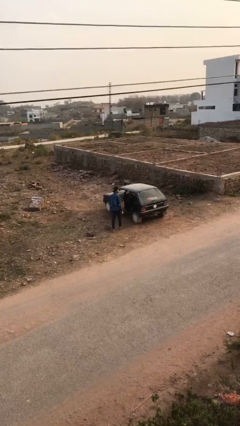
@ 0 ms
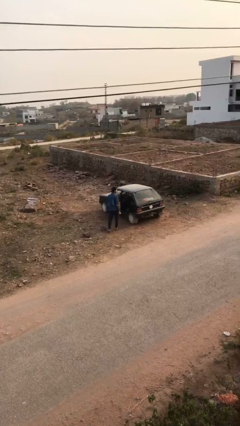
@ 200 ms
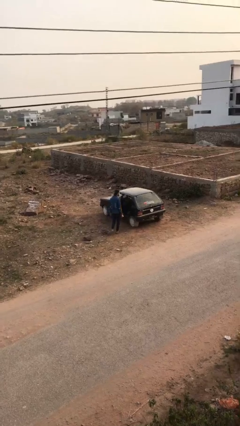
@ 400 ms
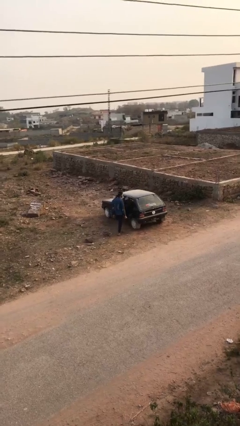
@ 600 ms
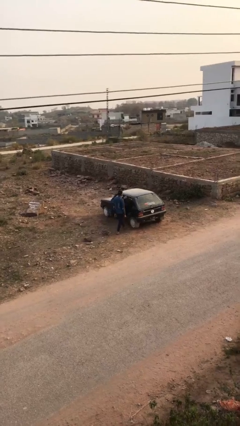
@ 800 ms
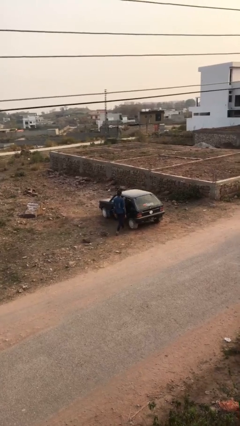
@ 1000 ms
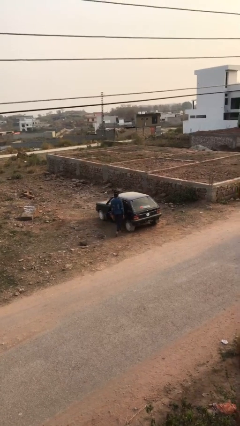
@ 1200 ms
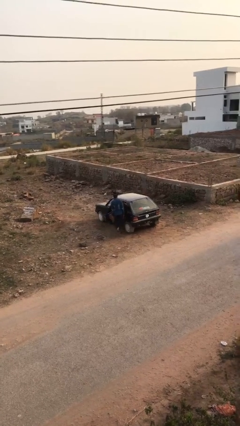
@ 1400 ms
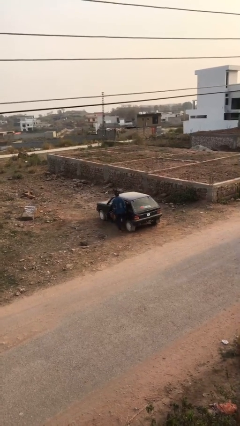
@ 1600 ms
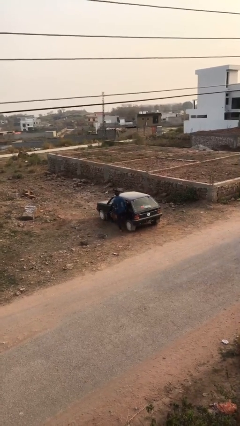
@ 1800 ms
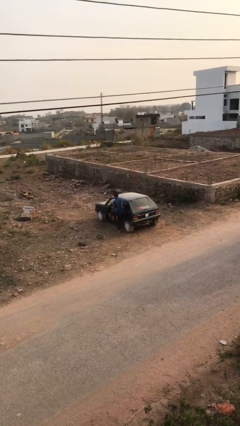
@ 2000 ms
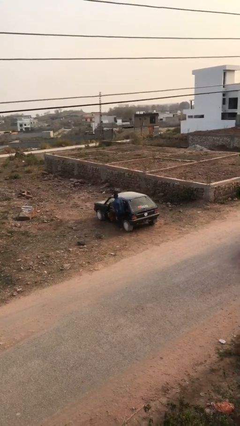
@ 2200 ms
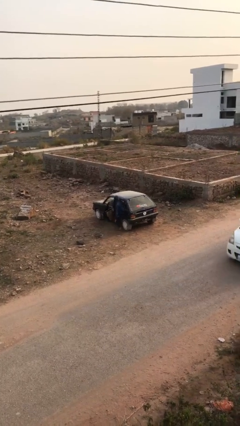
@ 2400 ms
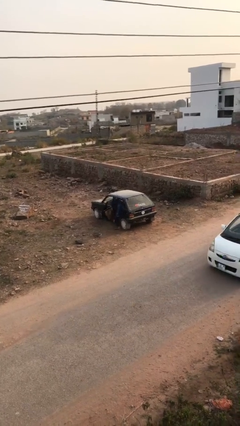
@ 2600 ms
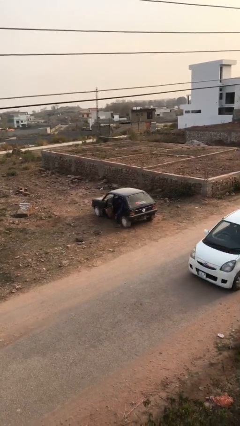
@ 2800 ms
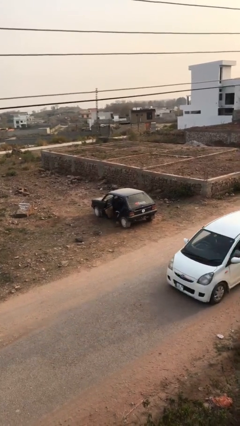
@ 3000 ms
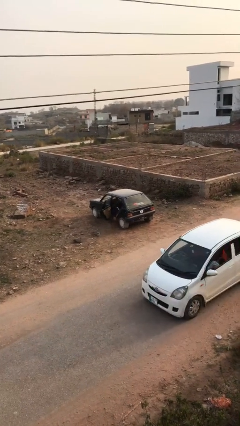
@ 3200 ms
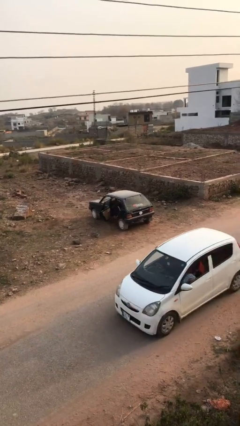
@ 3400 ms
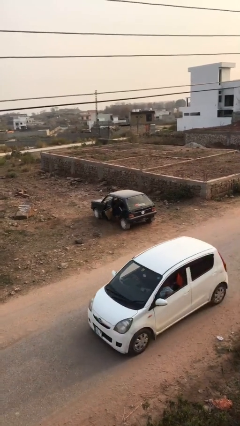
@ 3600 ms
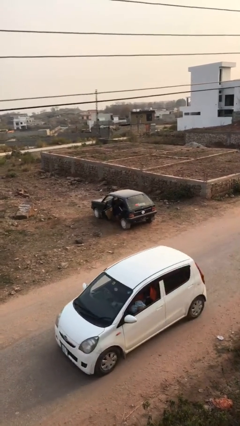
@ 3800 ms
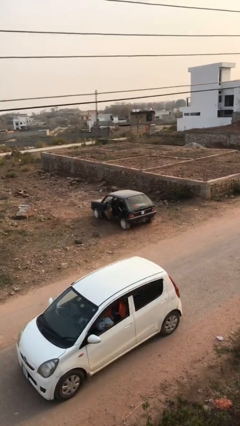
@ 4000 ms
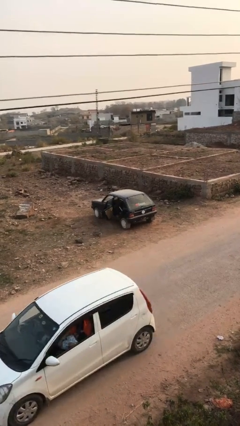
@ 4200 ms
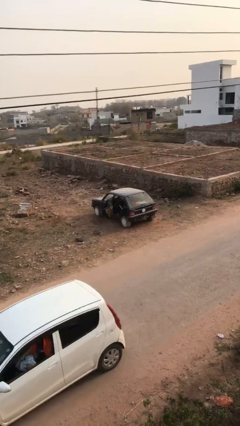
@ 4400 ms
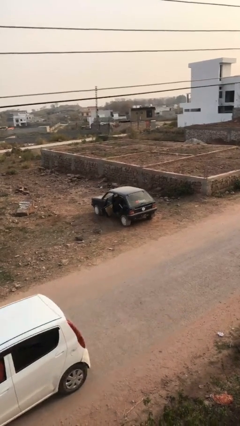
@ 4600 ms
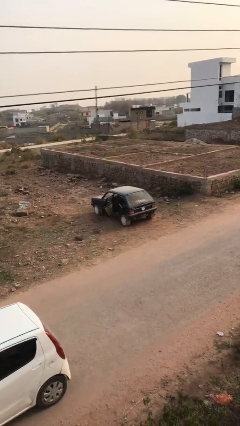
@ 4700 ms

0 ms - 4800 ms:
person enters car

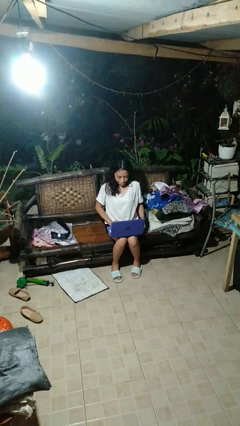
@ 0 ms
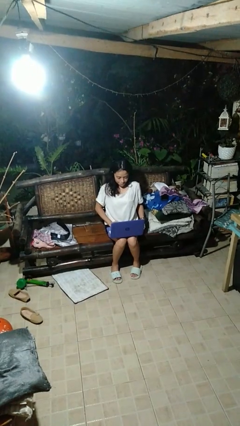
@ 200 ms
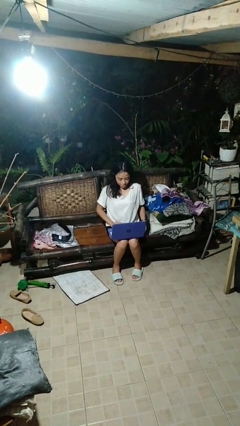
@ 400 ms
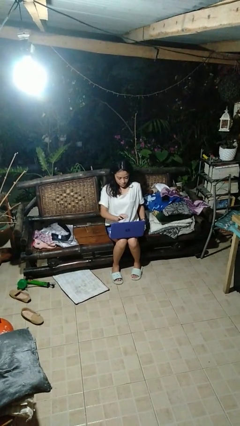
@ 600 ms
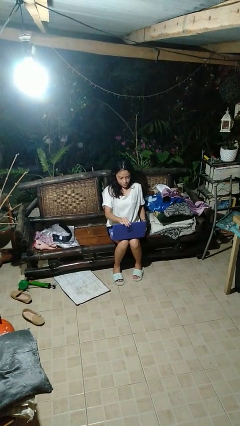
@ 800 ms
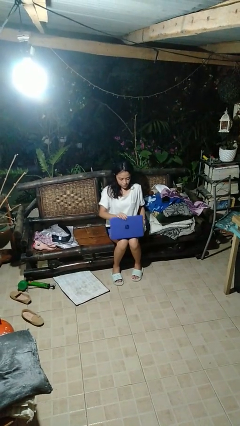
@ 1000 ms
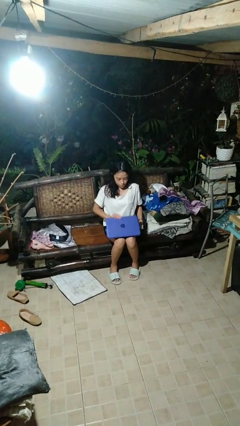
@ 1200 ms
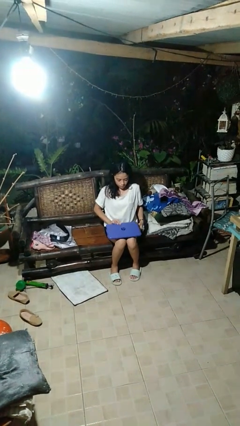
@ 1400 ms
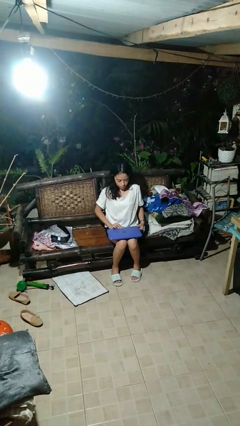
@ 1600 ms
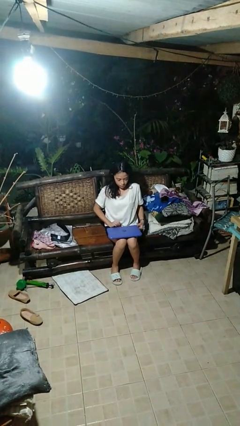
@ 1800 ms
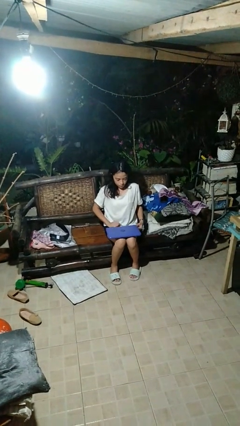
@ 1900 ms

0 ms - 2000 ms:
person closes laptop

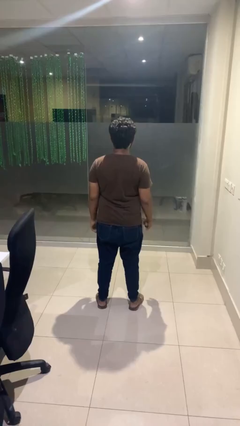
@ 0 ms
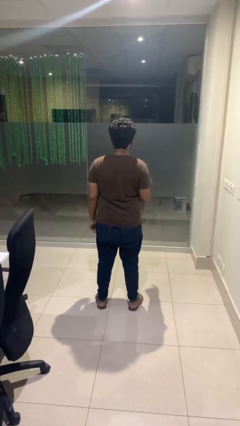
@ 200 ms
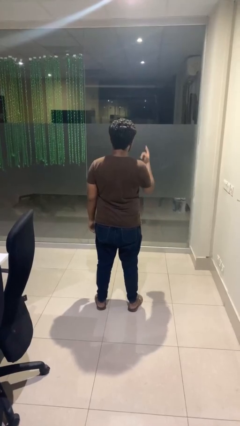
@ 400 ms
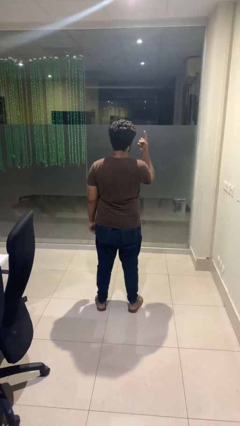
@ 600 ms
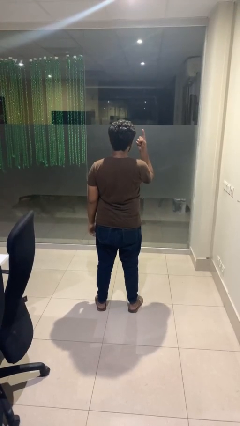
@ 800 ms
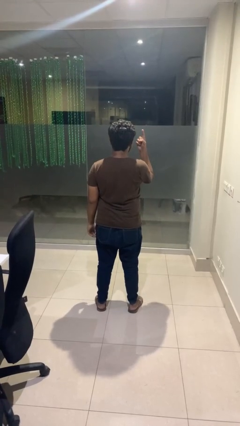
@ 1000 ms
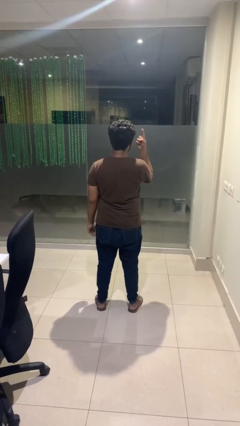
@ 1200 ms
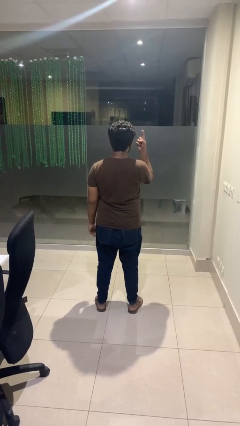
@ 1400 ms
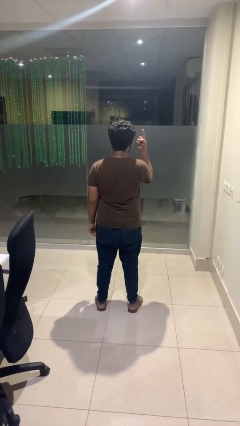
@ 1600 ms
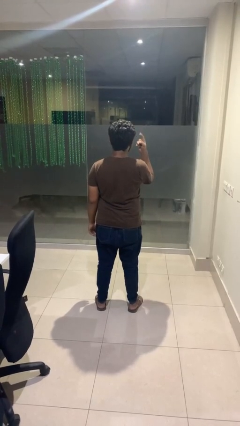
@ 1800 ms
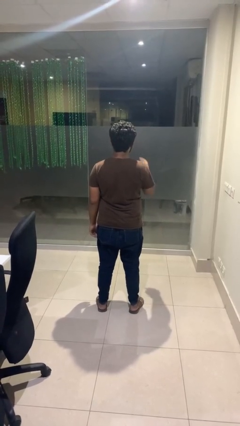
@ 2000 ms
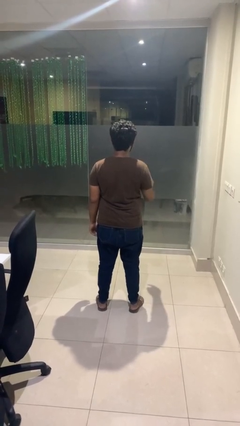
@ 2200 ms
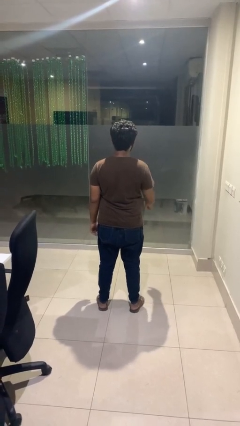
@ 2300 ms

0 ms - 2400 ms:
person gestures number one

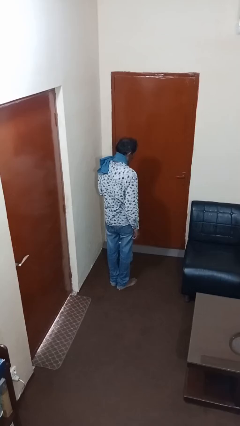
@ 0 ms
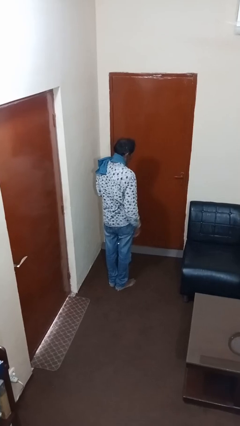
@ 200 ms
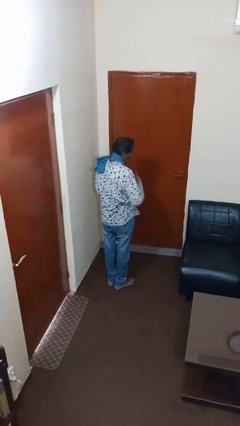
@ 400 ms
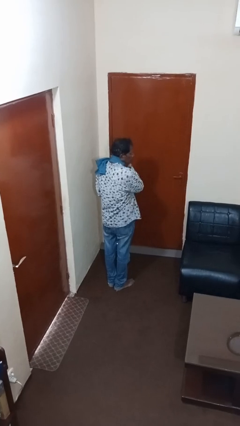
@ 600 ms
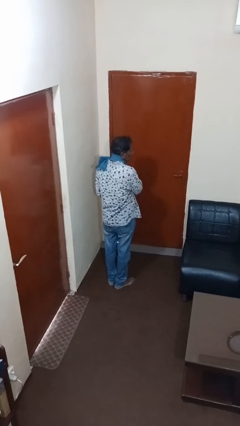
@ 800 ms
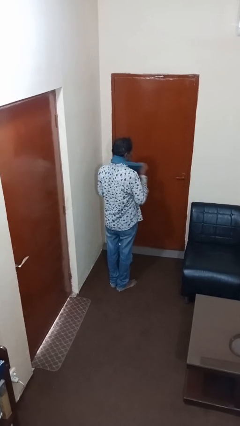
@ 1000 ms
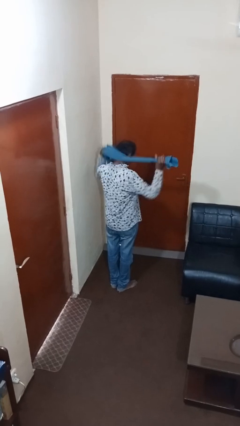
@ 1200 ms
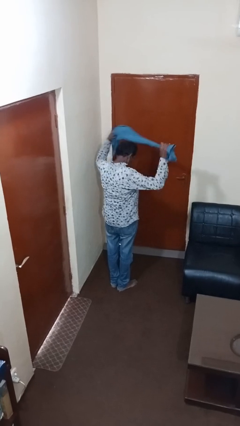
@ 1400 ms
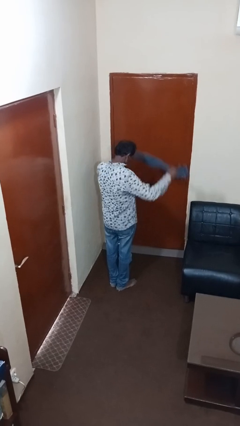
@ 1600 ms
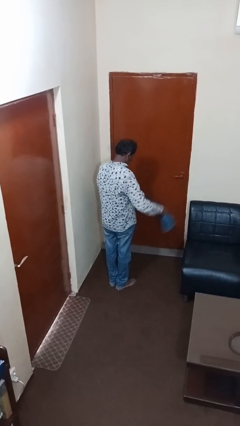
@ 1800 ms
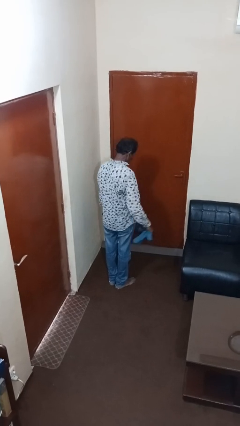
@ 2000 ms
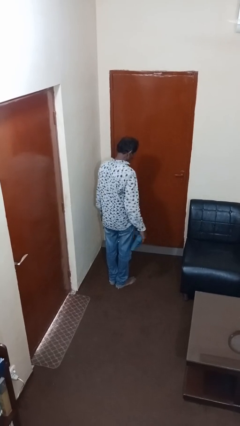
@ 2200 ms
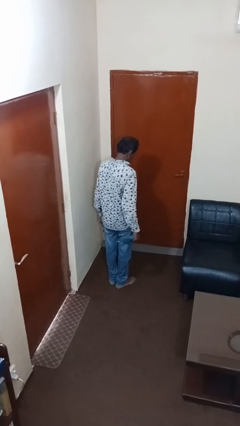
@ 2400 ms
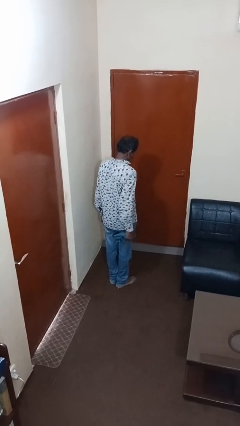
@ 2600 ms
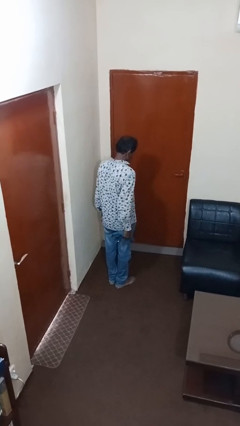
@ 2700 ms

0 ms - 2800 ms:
person takes off scarf

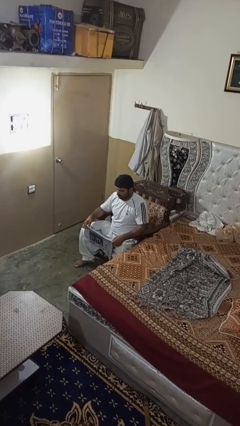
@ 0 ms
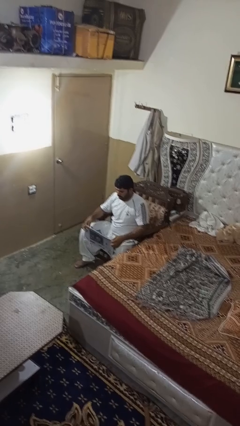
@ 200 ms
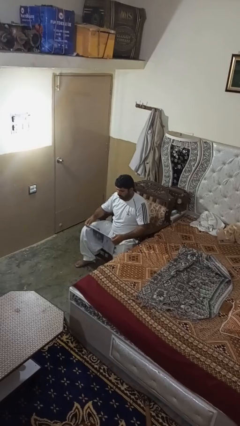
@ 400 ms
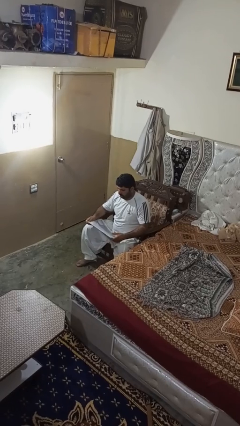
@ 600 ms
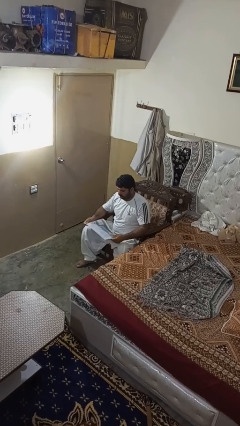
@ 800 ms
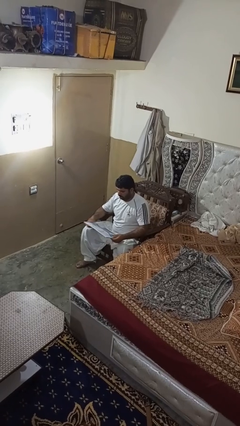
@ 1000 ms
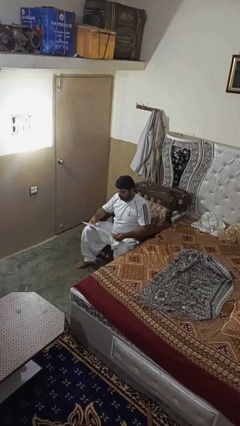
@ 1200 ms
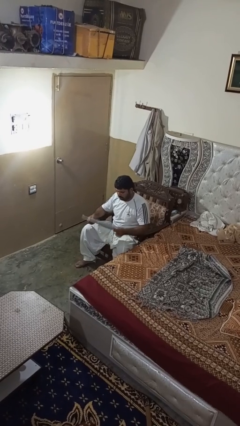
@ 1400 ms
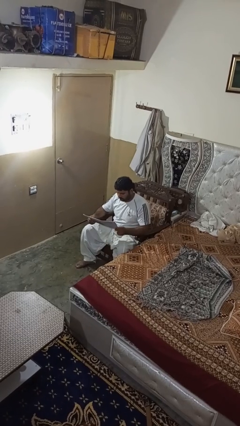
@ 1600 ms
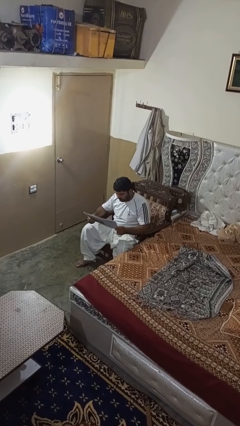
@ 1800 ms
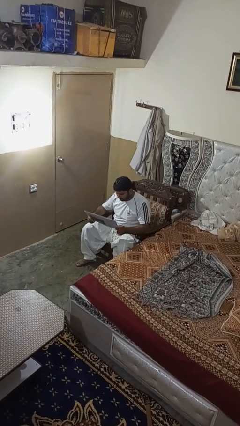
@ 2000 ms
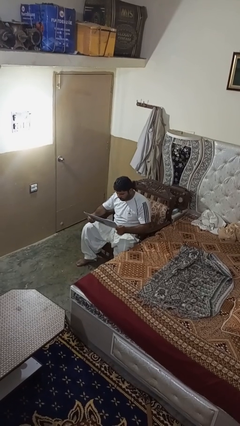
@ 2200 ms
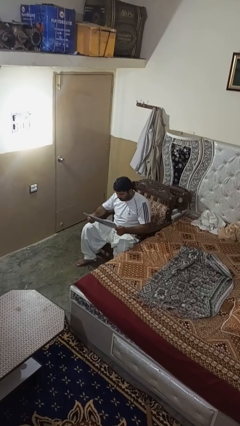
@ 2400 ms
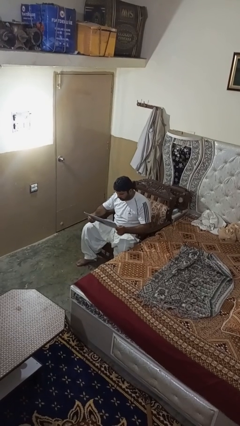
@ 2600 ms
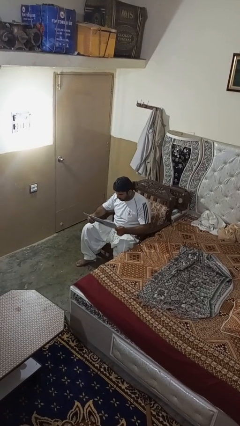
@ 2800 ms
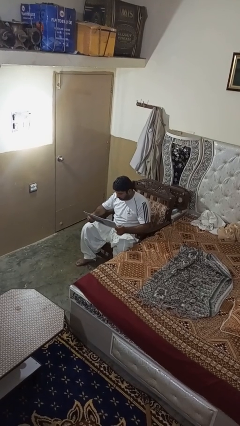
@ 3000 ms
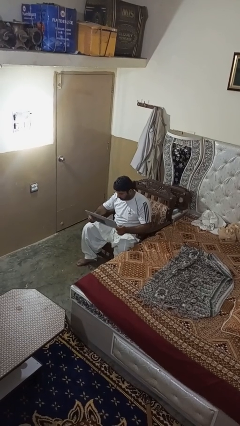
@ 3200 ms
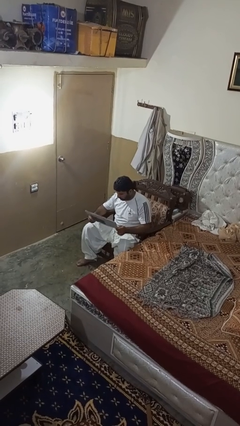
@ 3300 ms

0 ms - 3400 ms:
person reads newspaper

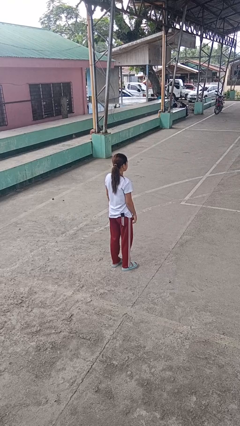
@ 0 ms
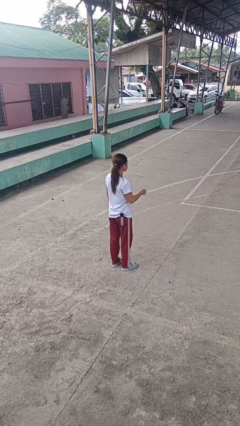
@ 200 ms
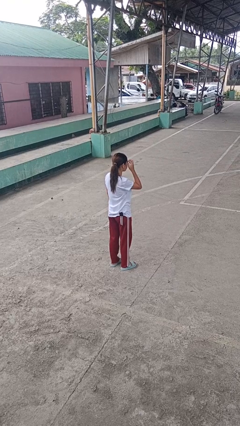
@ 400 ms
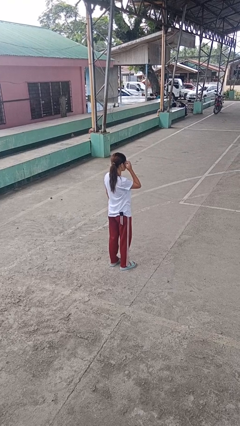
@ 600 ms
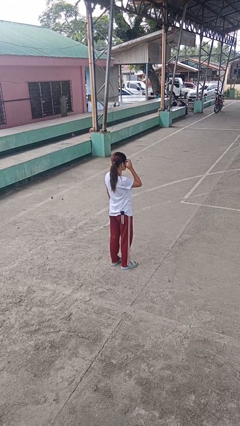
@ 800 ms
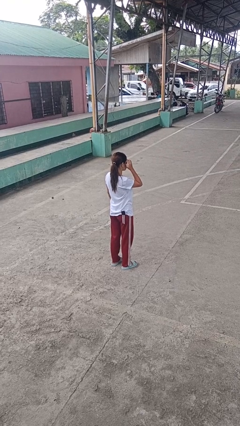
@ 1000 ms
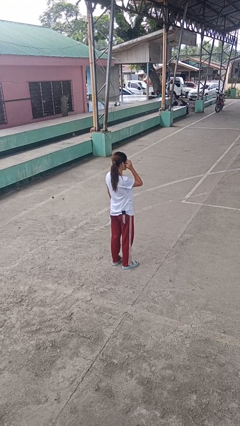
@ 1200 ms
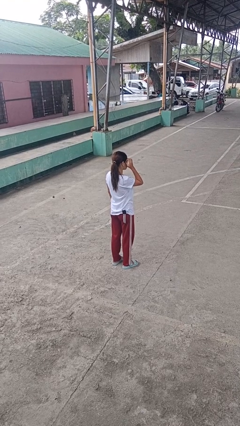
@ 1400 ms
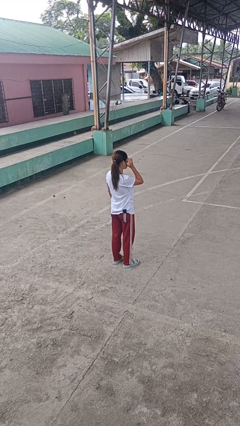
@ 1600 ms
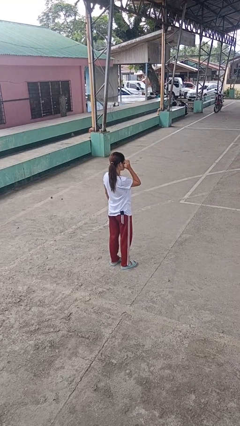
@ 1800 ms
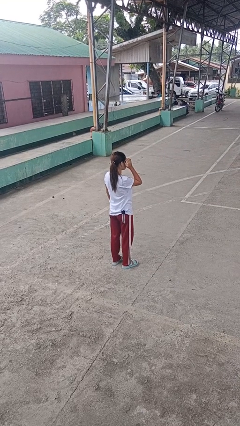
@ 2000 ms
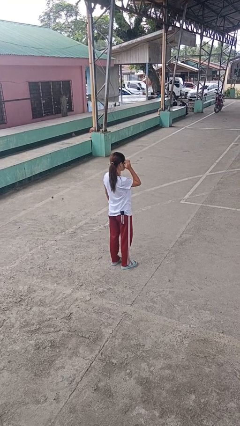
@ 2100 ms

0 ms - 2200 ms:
person scratches face
